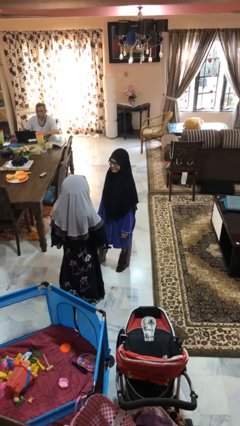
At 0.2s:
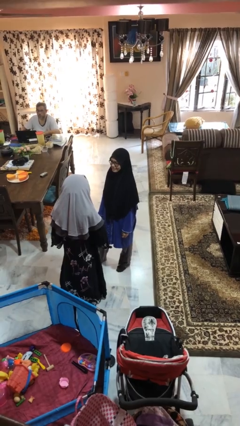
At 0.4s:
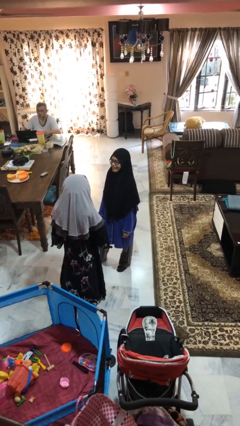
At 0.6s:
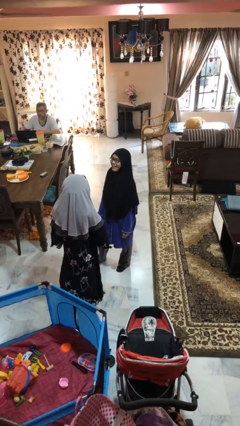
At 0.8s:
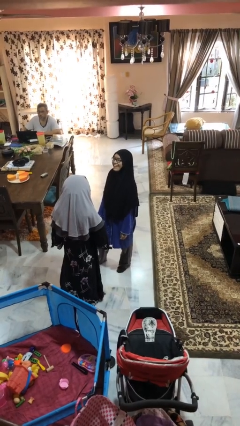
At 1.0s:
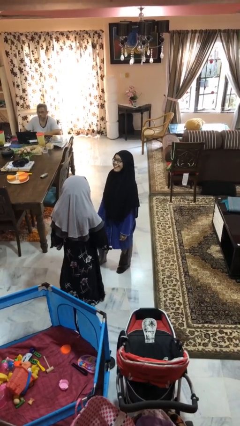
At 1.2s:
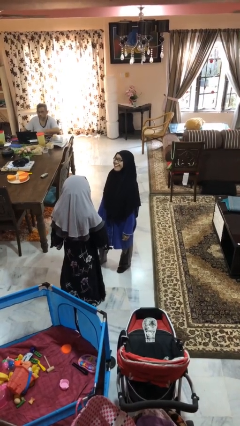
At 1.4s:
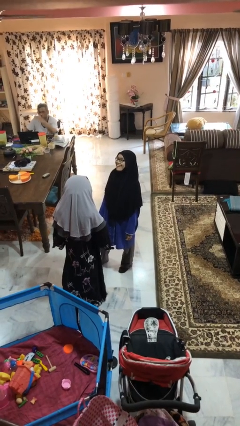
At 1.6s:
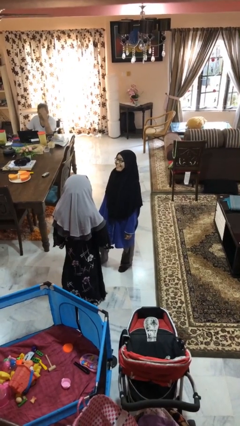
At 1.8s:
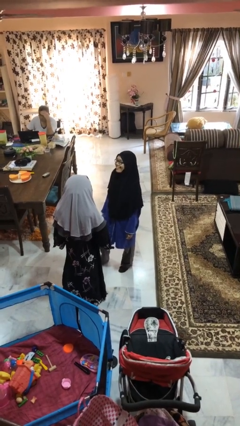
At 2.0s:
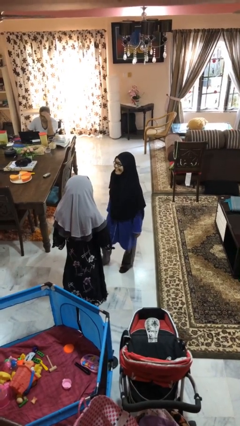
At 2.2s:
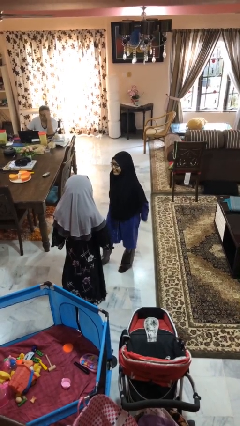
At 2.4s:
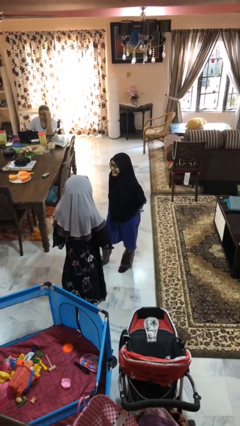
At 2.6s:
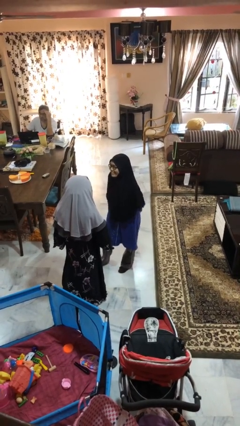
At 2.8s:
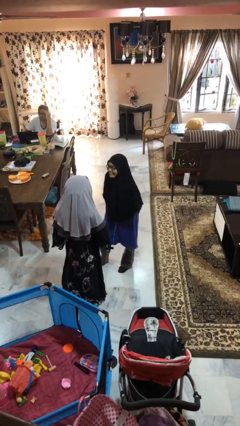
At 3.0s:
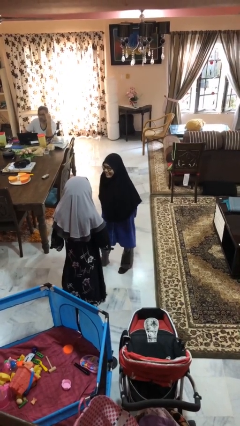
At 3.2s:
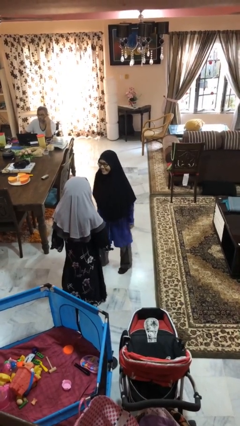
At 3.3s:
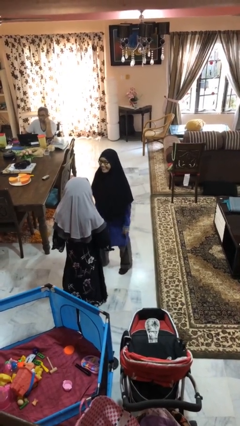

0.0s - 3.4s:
person laughs with person

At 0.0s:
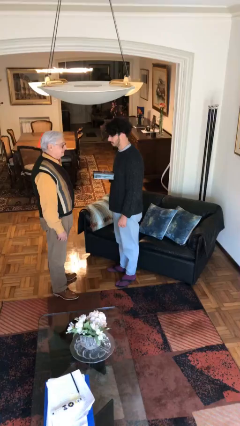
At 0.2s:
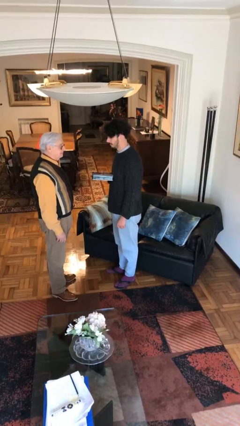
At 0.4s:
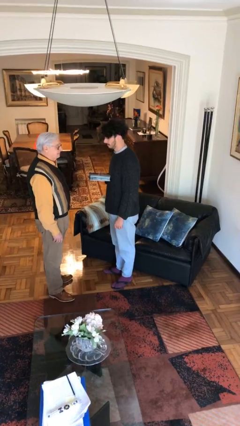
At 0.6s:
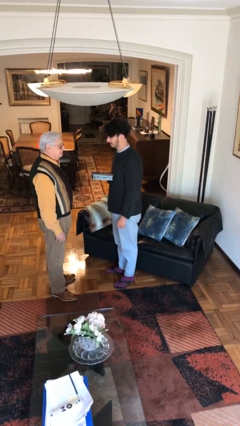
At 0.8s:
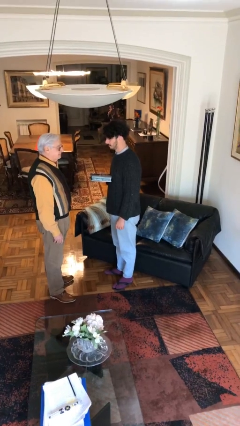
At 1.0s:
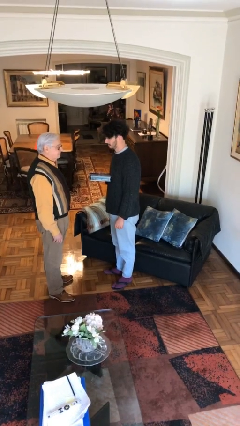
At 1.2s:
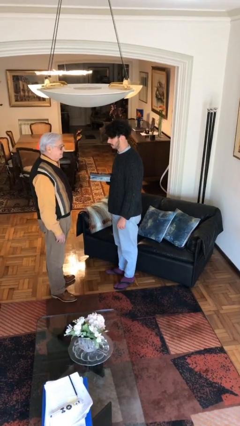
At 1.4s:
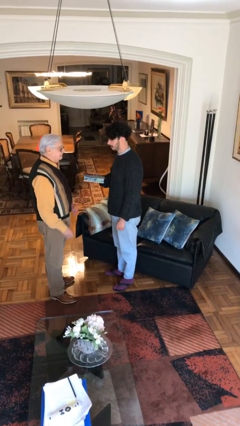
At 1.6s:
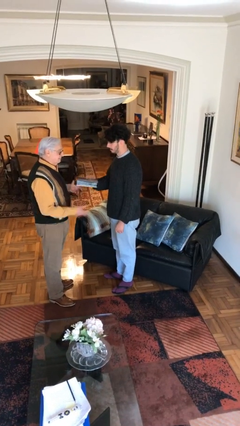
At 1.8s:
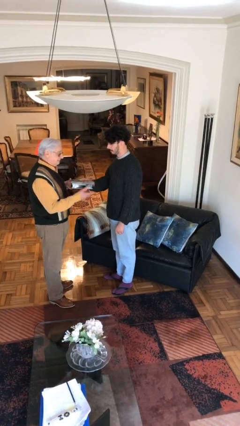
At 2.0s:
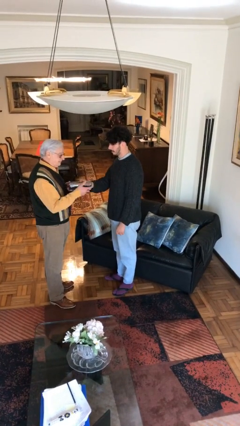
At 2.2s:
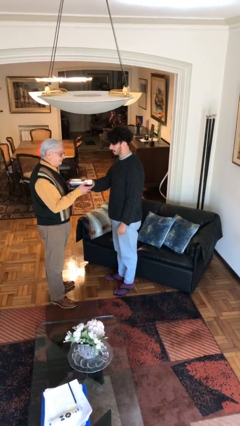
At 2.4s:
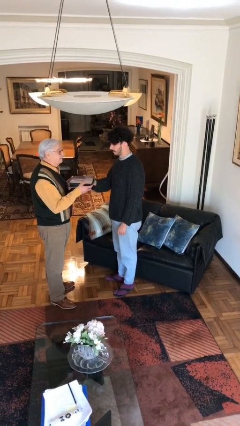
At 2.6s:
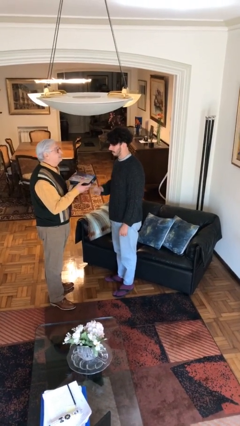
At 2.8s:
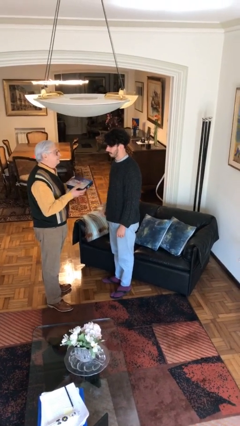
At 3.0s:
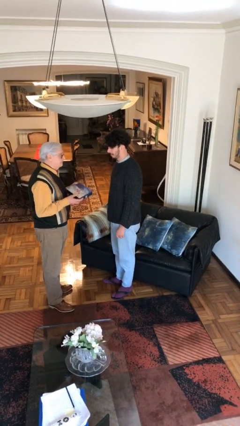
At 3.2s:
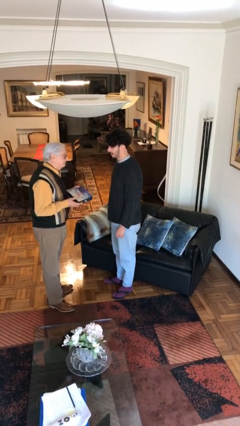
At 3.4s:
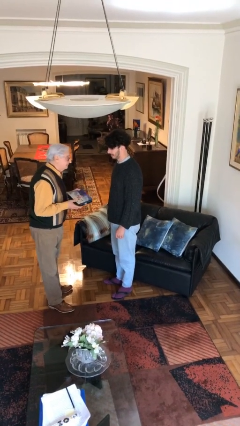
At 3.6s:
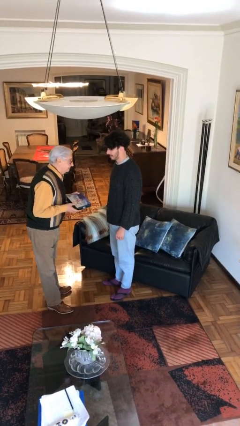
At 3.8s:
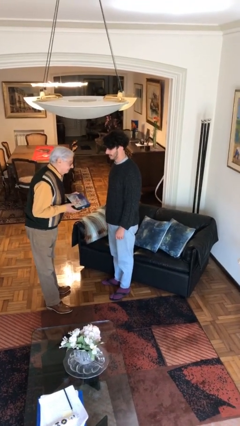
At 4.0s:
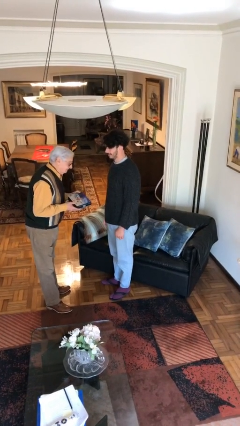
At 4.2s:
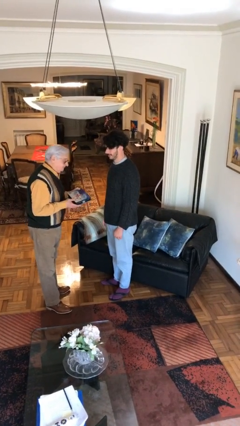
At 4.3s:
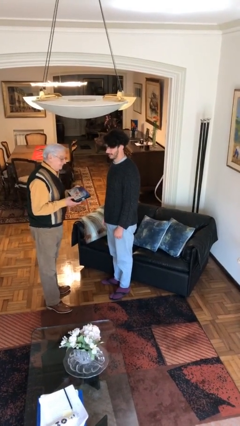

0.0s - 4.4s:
person transfers object to person

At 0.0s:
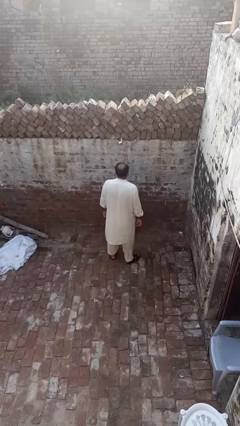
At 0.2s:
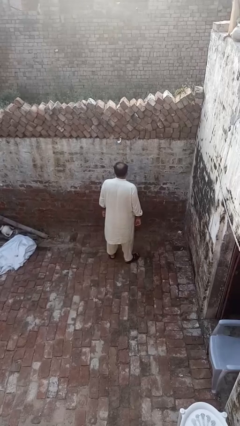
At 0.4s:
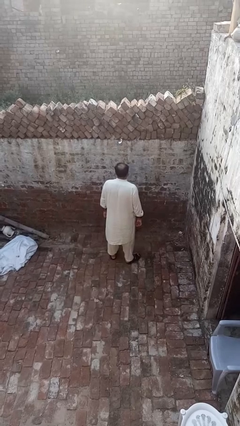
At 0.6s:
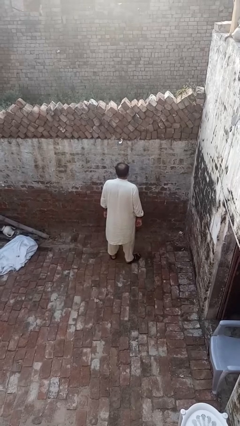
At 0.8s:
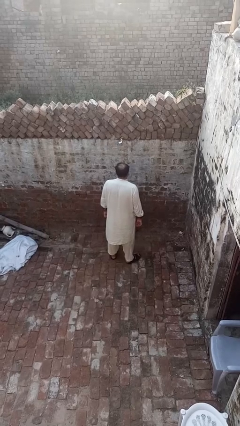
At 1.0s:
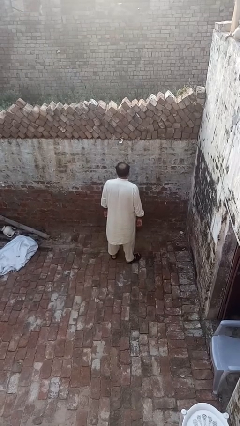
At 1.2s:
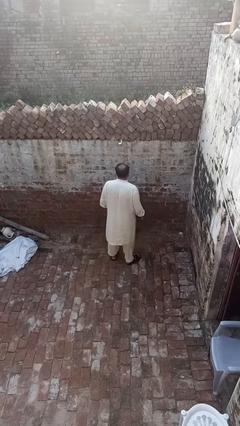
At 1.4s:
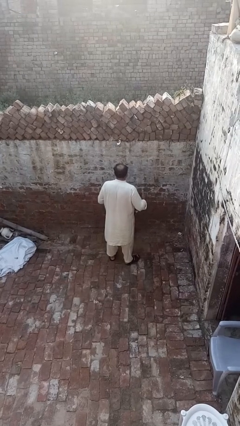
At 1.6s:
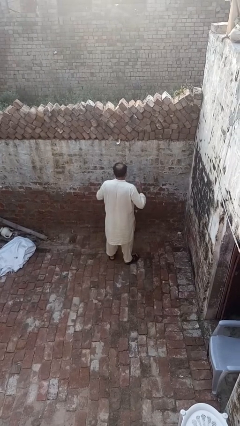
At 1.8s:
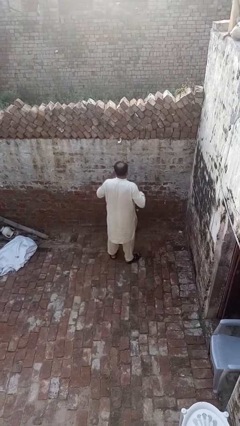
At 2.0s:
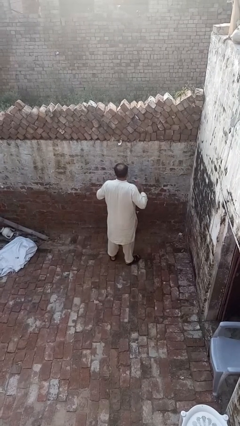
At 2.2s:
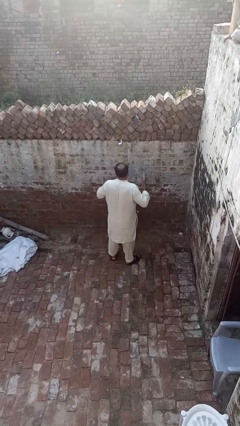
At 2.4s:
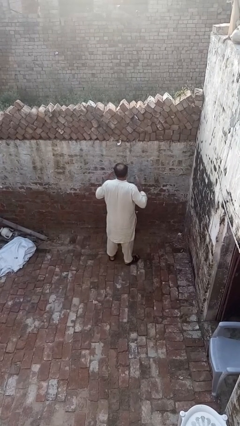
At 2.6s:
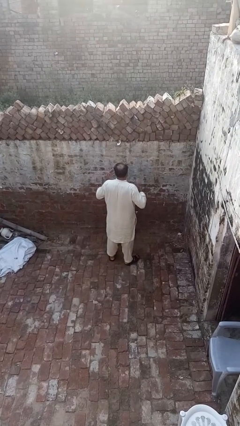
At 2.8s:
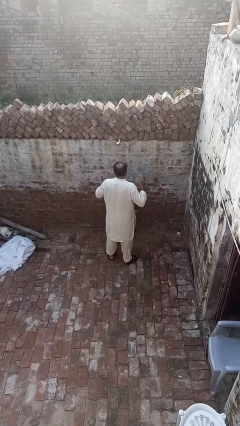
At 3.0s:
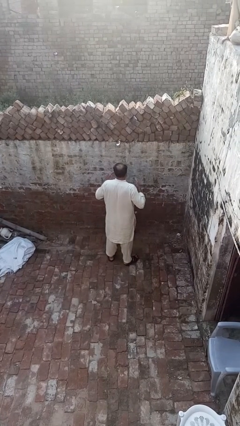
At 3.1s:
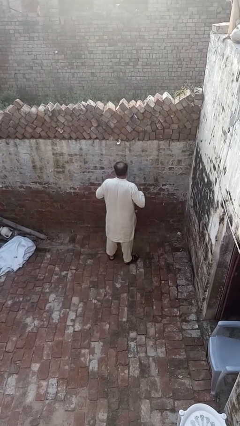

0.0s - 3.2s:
person drums on chest

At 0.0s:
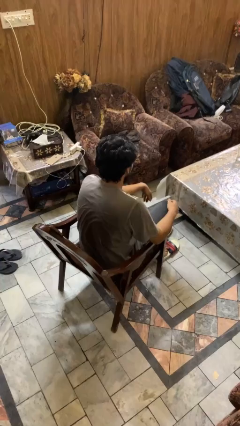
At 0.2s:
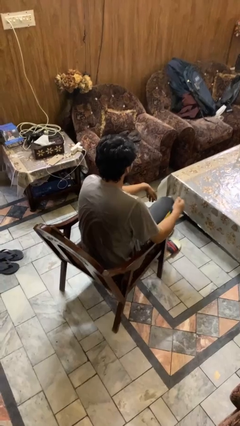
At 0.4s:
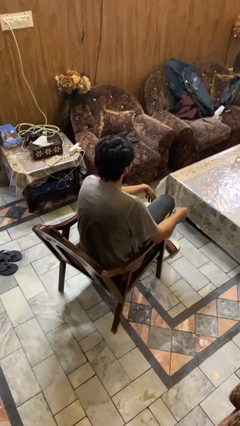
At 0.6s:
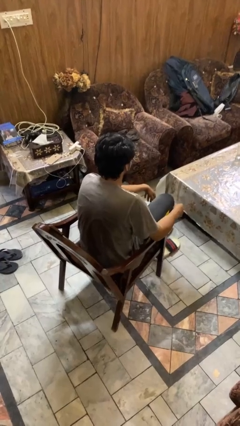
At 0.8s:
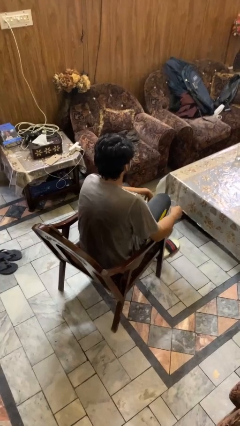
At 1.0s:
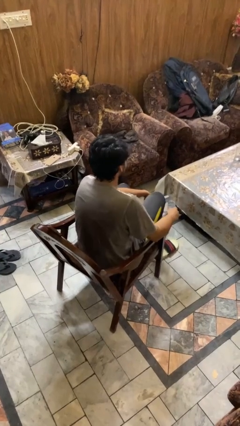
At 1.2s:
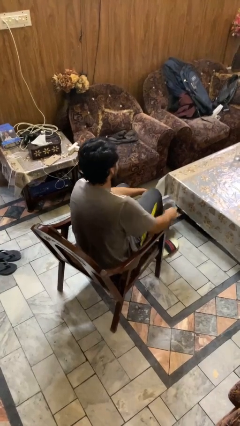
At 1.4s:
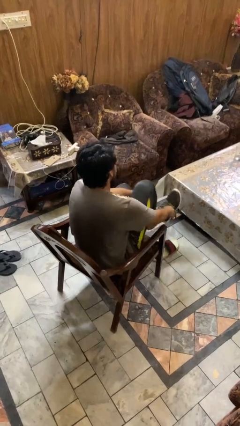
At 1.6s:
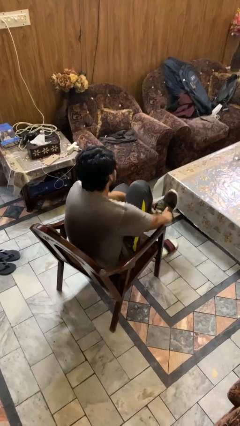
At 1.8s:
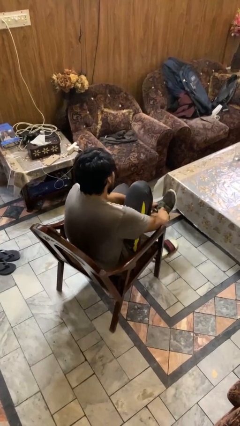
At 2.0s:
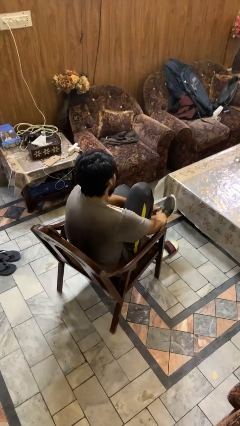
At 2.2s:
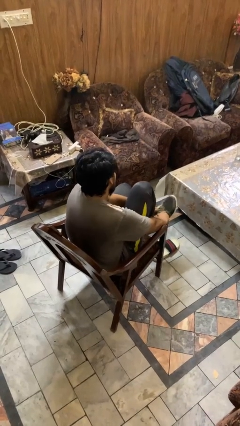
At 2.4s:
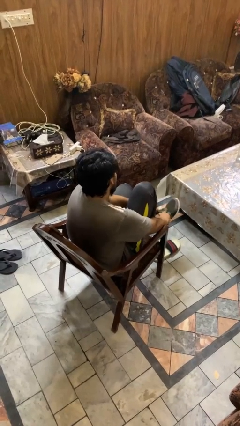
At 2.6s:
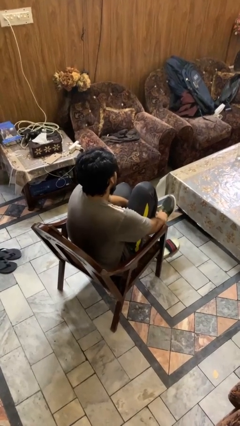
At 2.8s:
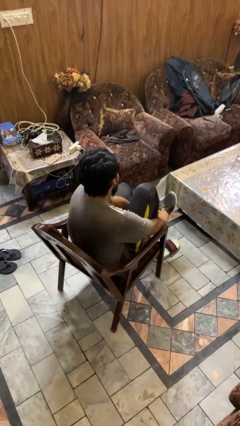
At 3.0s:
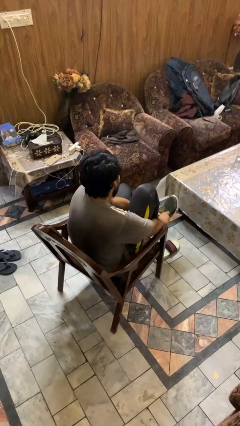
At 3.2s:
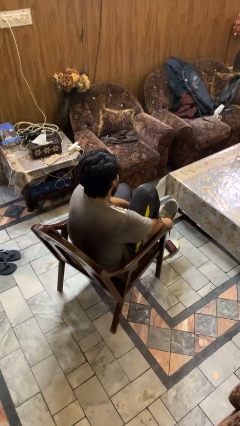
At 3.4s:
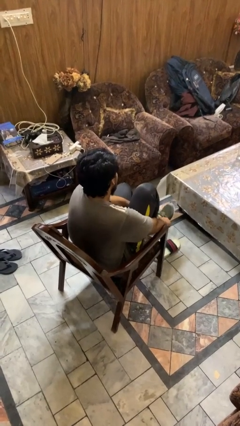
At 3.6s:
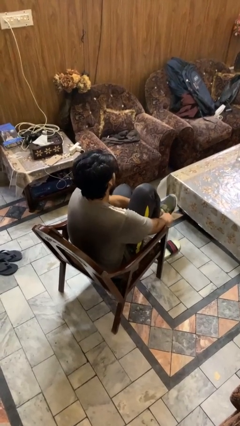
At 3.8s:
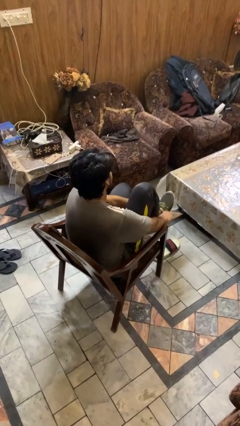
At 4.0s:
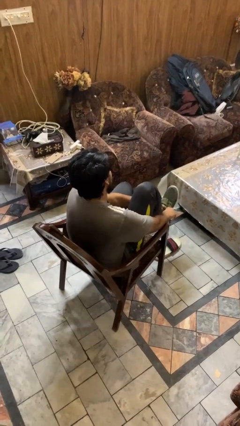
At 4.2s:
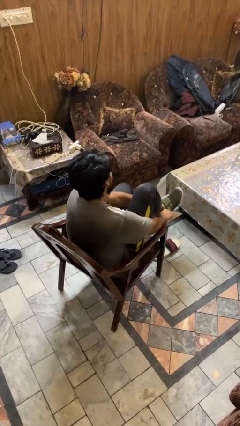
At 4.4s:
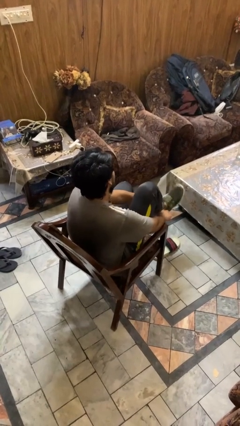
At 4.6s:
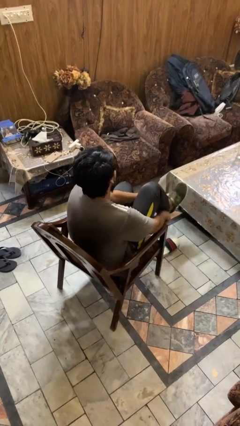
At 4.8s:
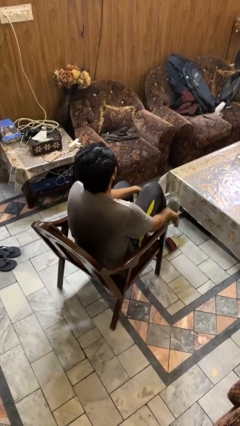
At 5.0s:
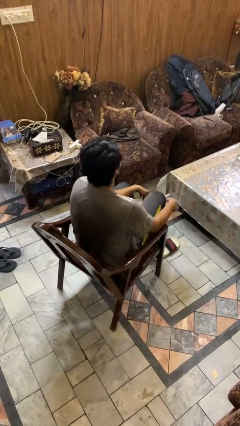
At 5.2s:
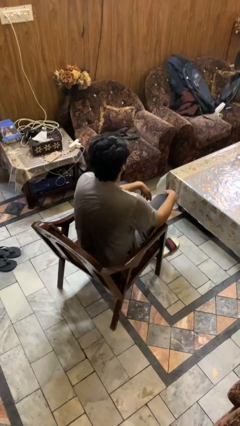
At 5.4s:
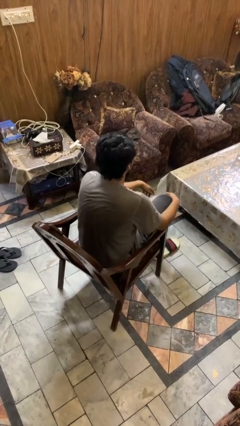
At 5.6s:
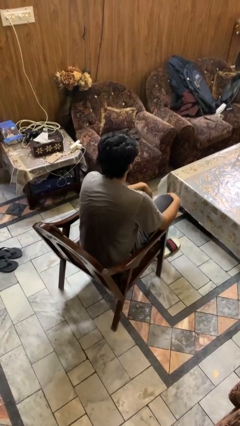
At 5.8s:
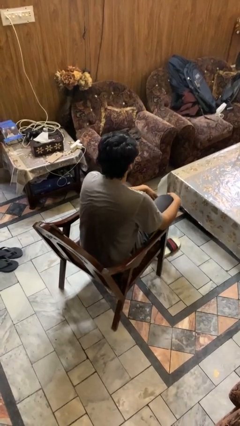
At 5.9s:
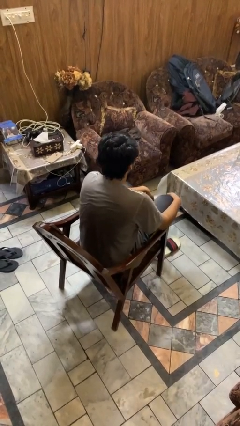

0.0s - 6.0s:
person puts on shoes

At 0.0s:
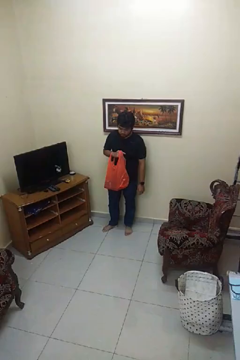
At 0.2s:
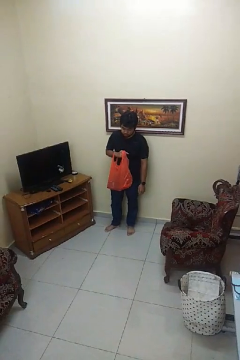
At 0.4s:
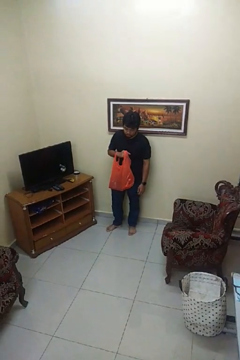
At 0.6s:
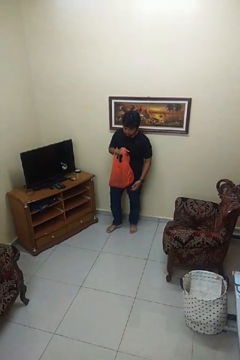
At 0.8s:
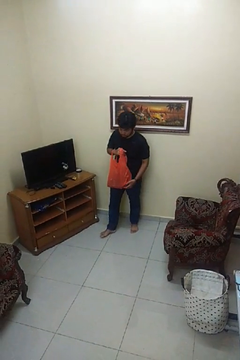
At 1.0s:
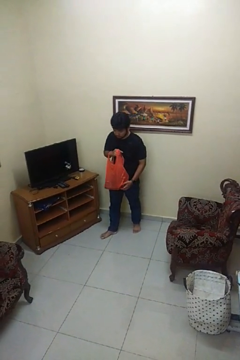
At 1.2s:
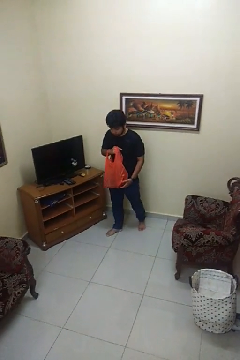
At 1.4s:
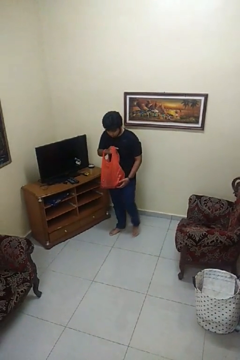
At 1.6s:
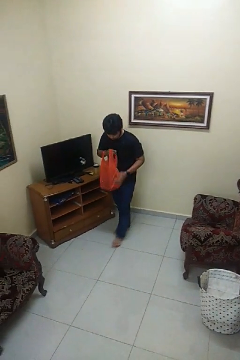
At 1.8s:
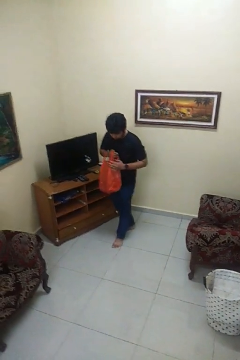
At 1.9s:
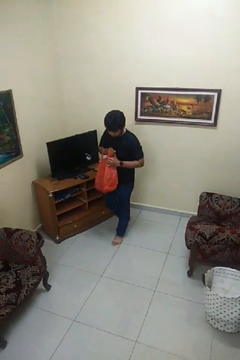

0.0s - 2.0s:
person carries groceries
